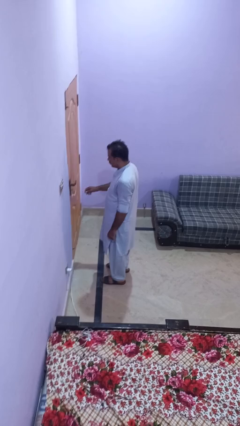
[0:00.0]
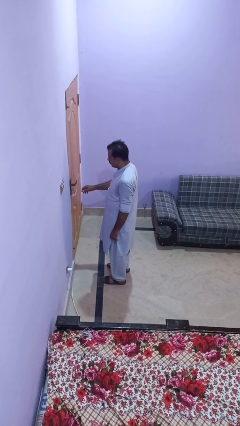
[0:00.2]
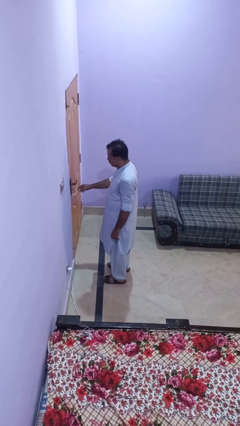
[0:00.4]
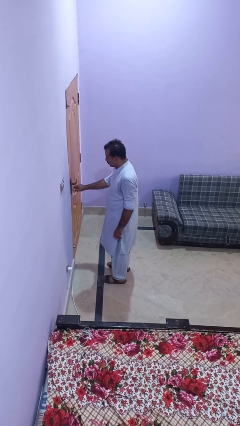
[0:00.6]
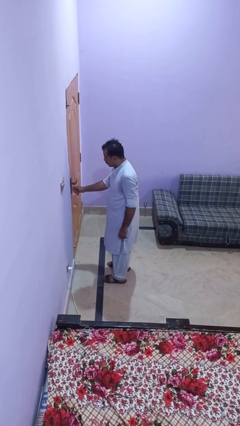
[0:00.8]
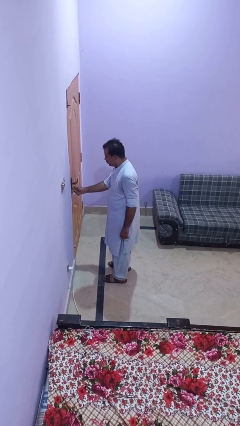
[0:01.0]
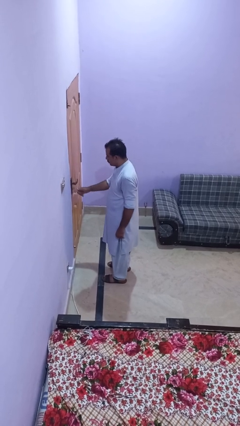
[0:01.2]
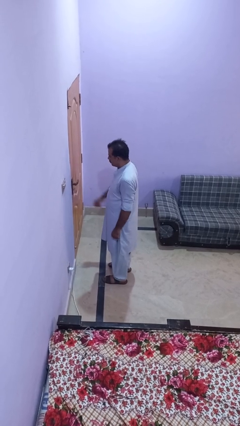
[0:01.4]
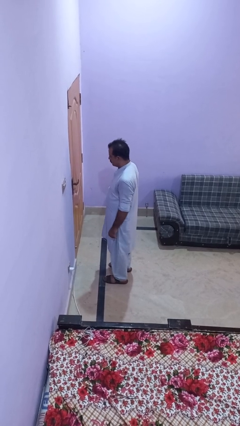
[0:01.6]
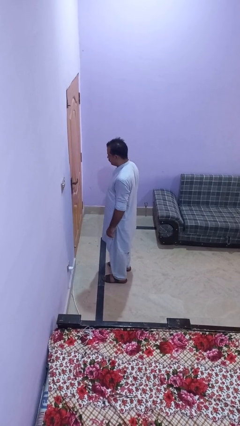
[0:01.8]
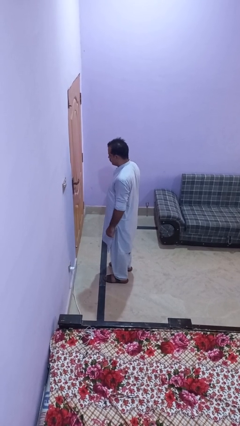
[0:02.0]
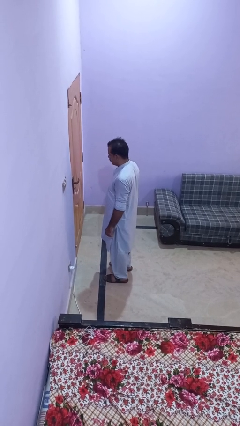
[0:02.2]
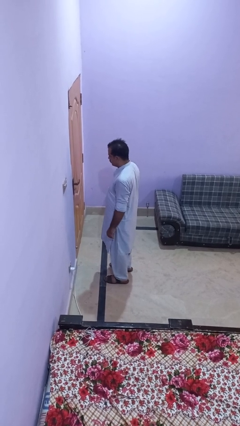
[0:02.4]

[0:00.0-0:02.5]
person unlocks door with keys

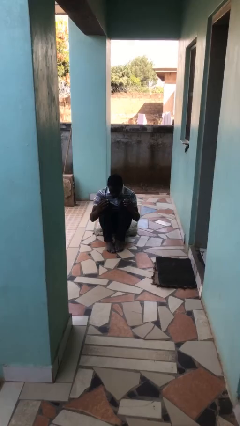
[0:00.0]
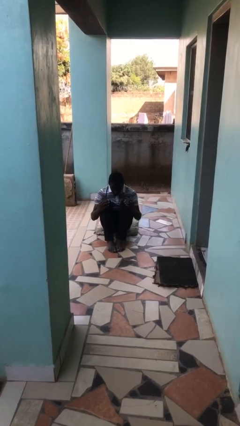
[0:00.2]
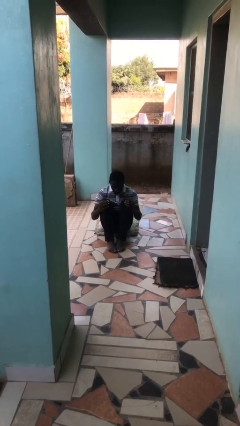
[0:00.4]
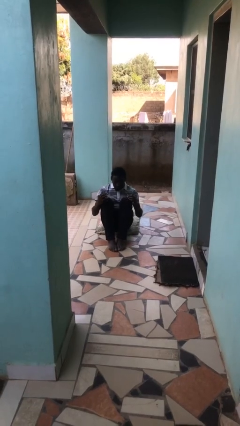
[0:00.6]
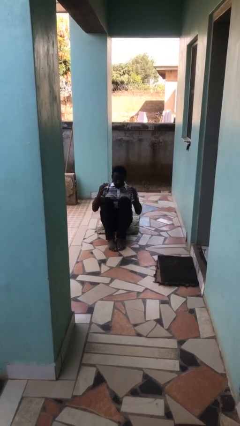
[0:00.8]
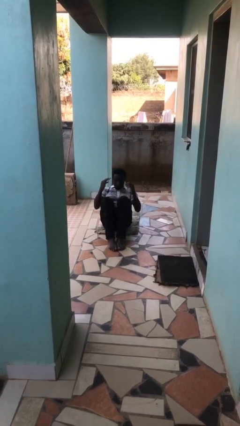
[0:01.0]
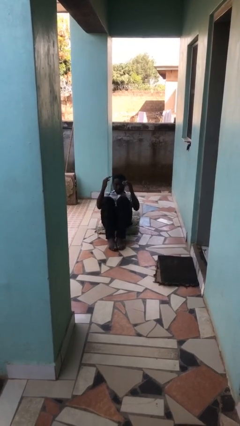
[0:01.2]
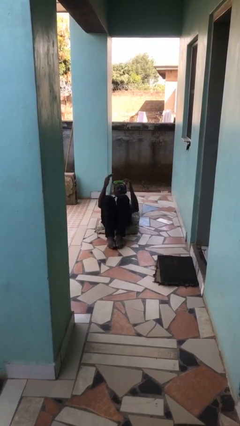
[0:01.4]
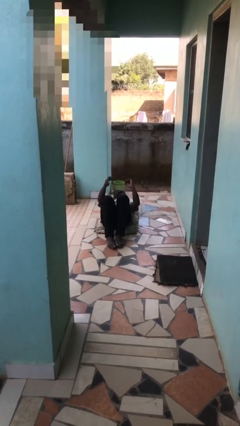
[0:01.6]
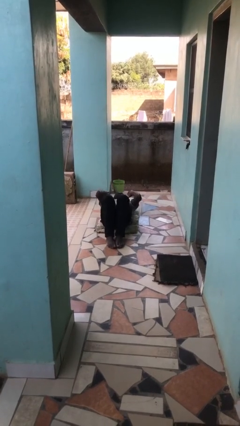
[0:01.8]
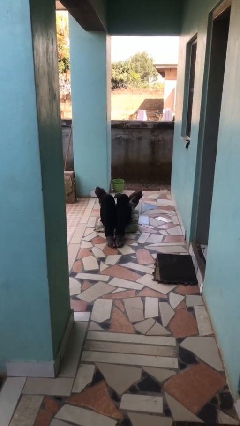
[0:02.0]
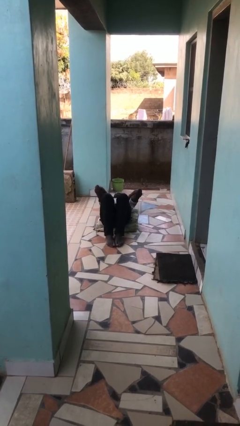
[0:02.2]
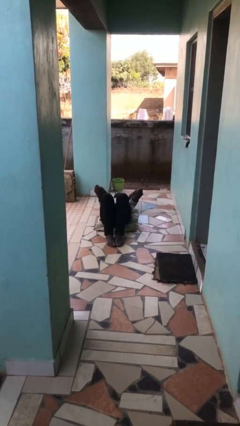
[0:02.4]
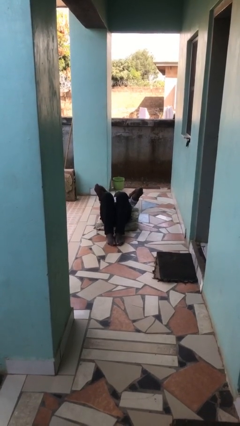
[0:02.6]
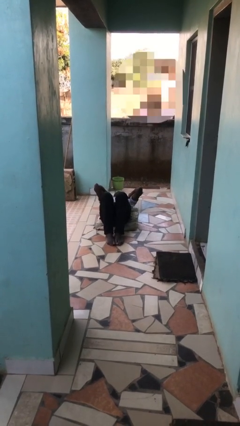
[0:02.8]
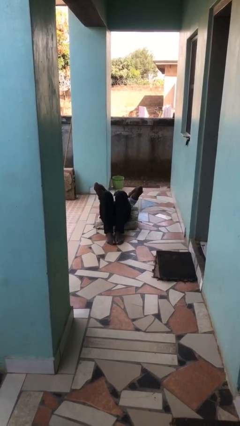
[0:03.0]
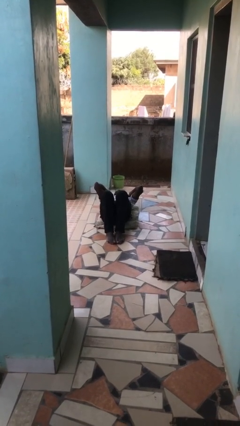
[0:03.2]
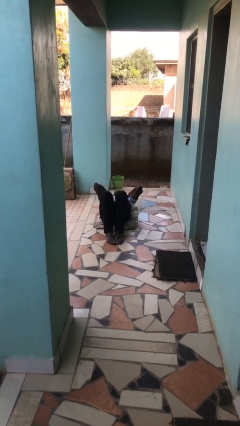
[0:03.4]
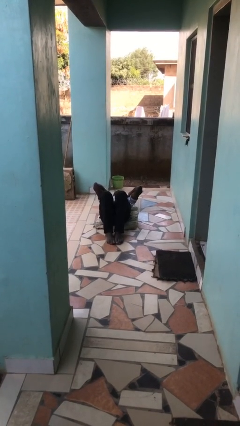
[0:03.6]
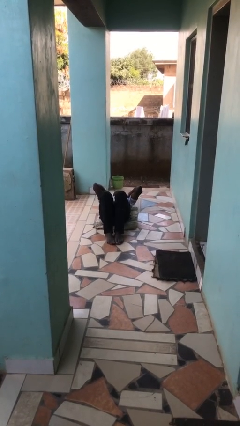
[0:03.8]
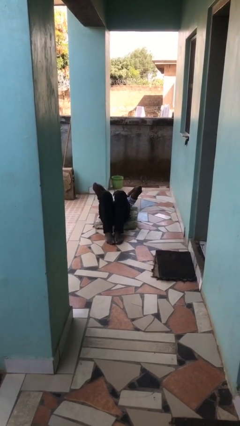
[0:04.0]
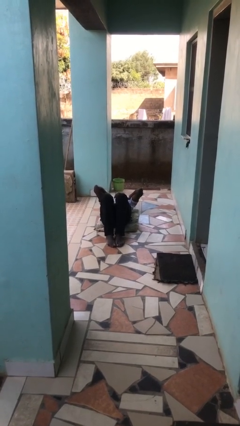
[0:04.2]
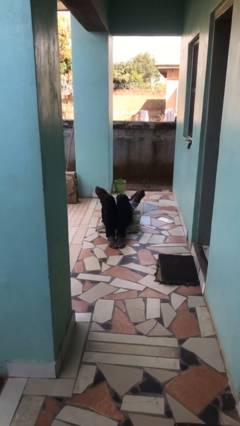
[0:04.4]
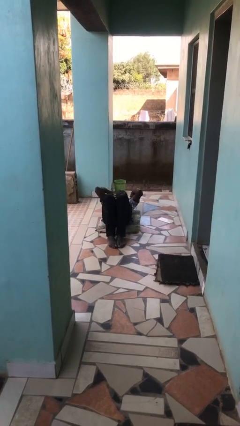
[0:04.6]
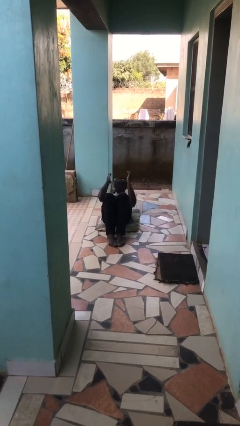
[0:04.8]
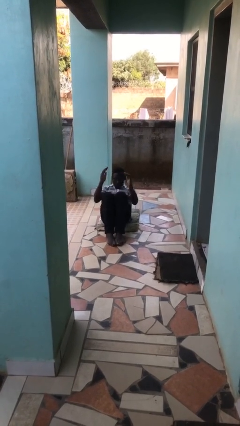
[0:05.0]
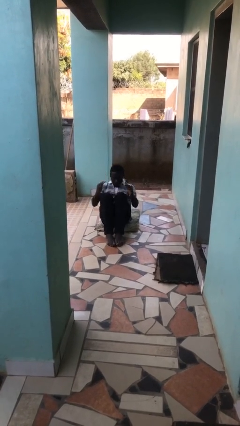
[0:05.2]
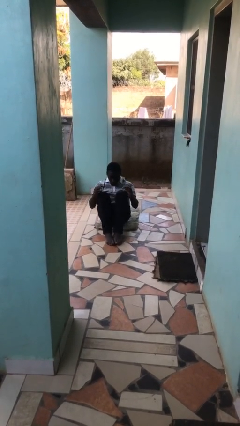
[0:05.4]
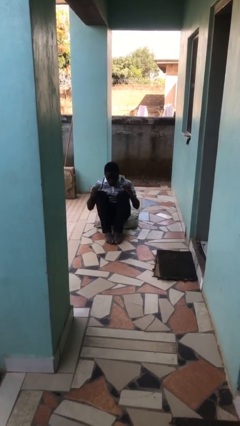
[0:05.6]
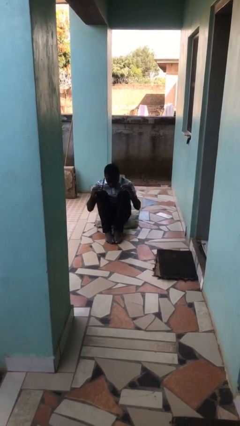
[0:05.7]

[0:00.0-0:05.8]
person exercises with situp

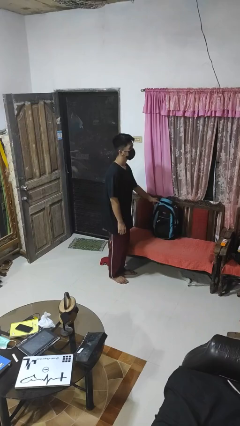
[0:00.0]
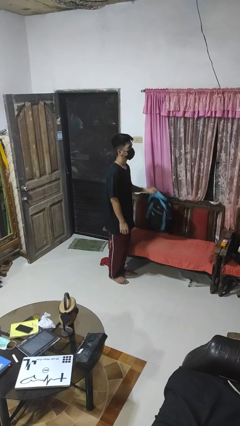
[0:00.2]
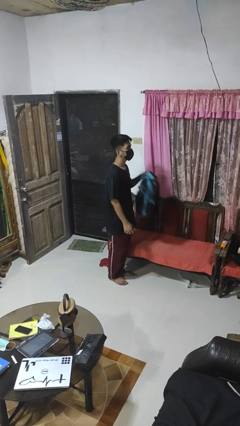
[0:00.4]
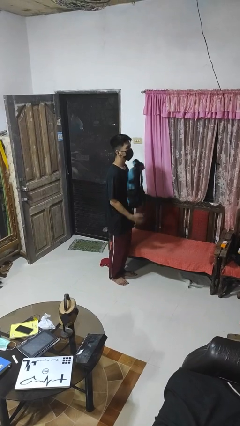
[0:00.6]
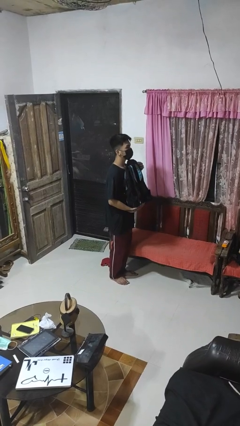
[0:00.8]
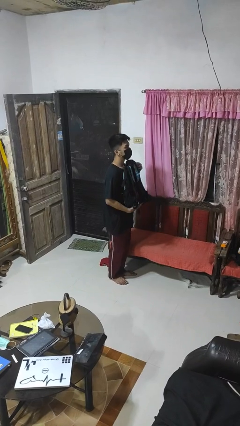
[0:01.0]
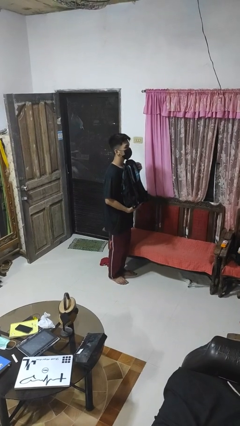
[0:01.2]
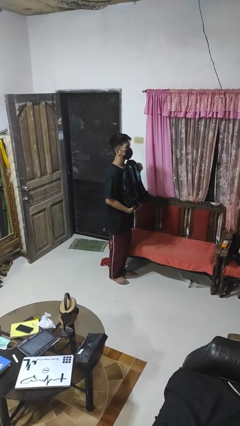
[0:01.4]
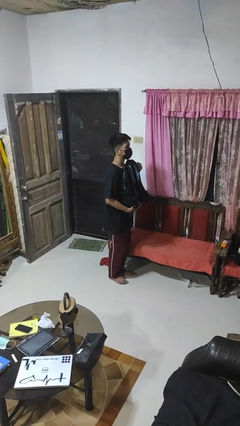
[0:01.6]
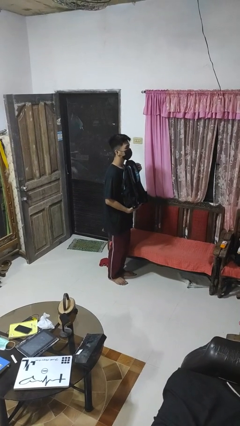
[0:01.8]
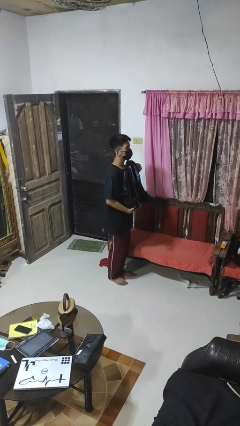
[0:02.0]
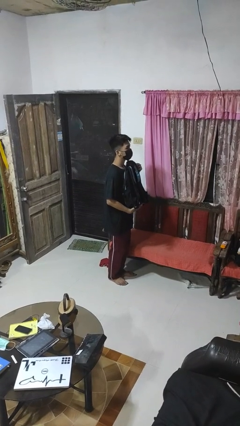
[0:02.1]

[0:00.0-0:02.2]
person picks up object from couch

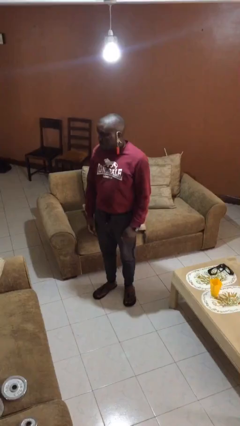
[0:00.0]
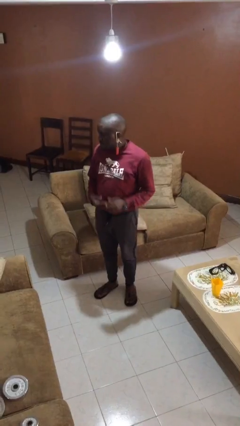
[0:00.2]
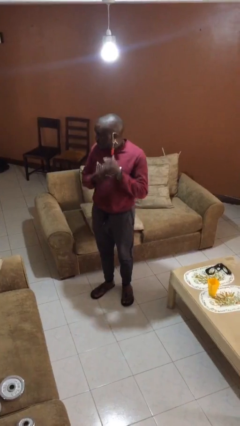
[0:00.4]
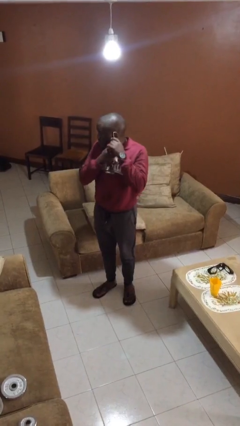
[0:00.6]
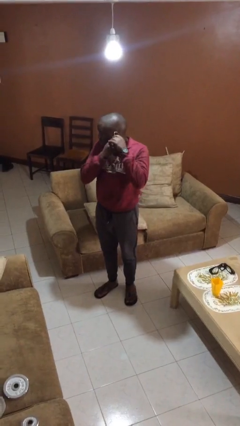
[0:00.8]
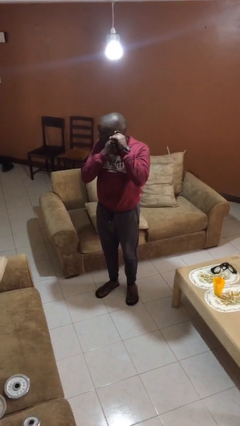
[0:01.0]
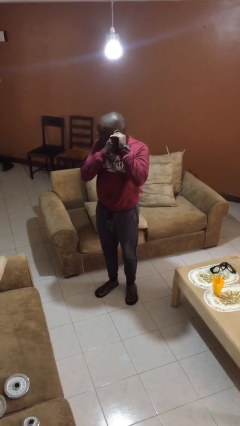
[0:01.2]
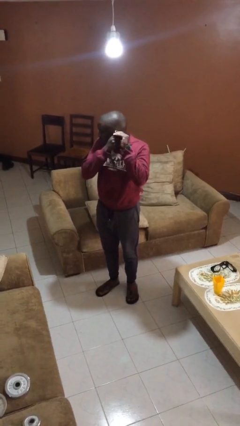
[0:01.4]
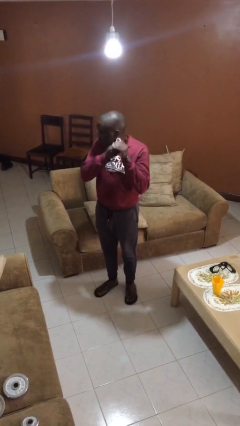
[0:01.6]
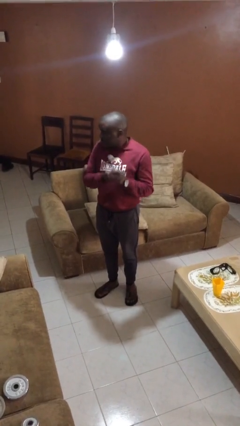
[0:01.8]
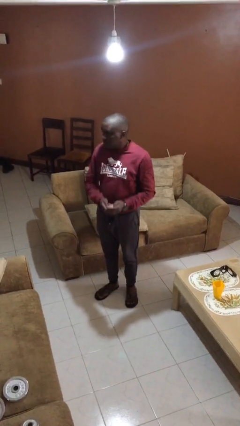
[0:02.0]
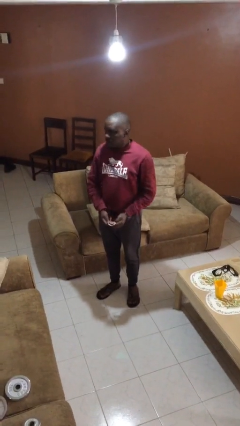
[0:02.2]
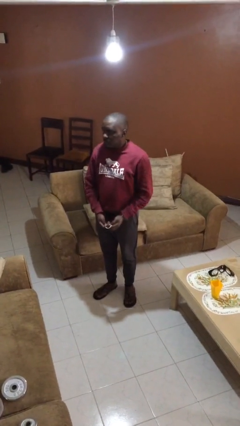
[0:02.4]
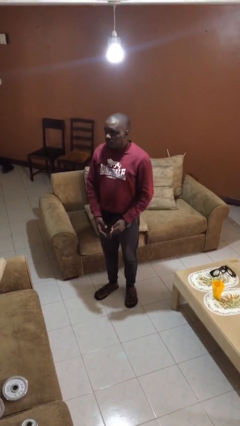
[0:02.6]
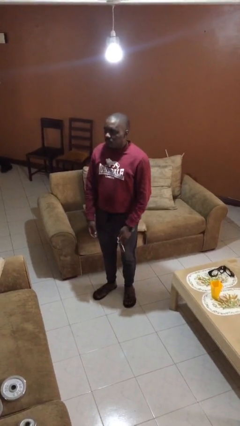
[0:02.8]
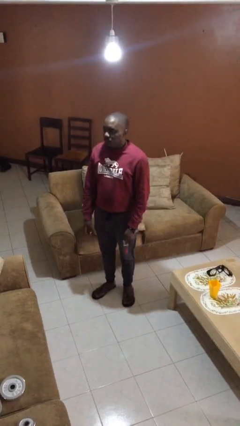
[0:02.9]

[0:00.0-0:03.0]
person takes off earrings

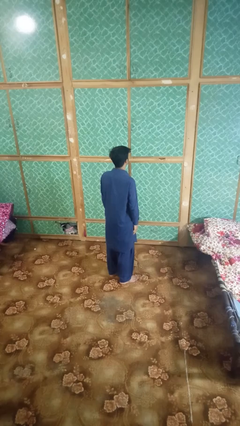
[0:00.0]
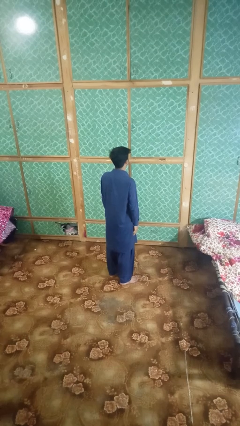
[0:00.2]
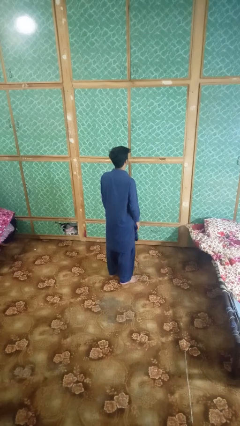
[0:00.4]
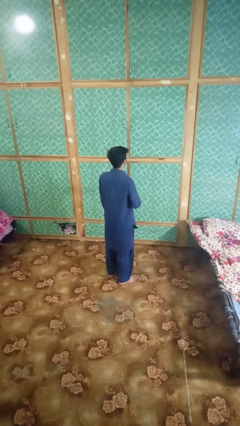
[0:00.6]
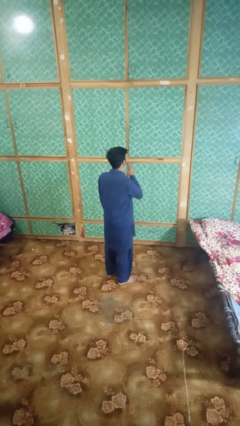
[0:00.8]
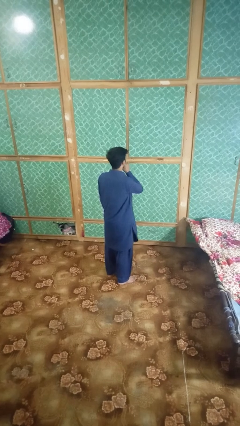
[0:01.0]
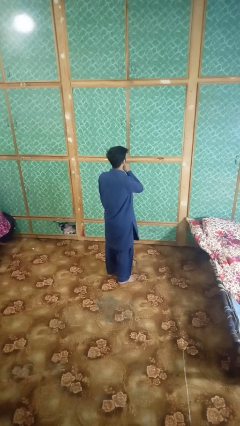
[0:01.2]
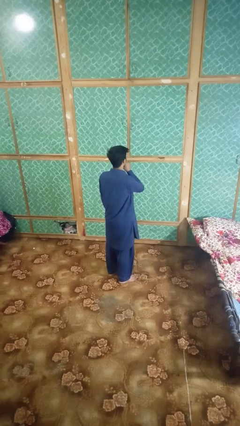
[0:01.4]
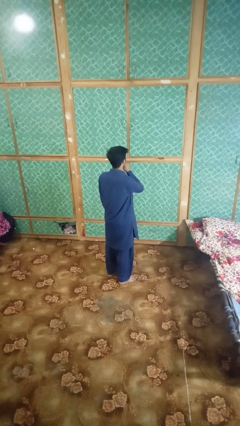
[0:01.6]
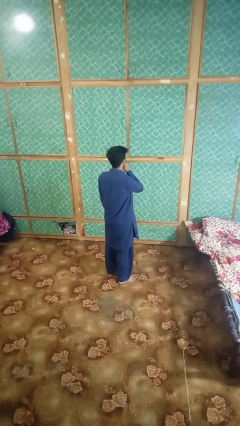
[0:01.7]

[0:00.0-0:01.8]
person gestures be quiet

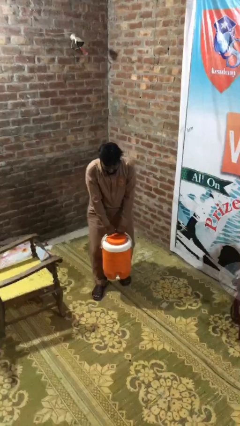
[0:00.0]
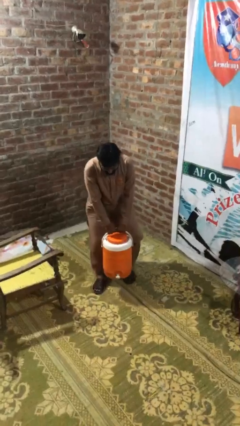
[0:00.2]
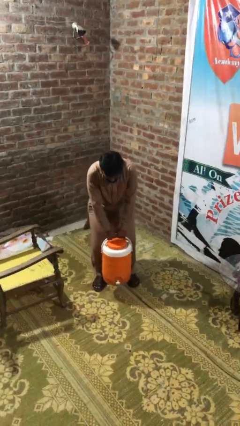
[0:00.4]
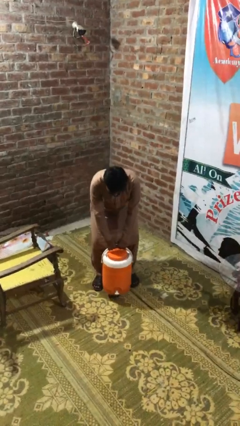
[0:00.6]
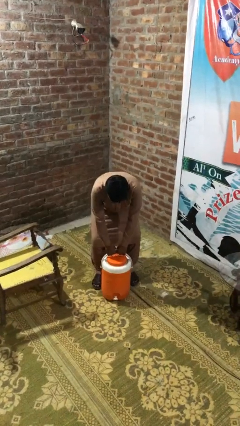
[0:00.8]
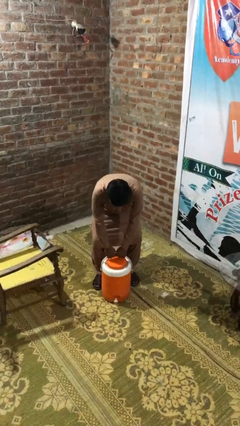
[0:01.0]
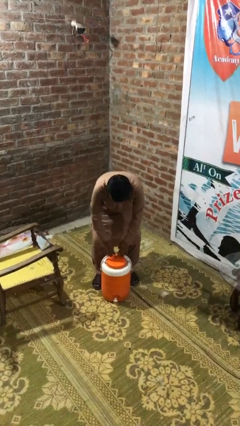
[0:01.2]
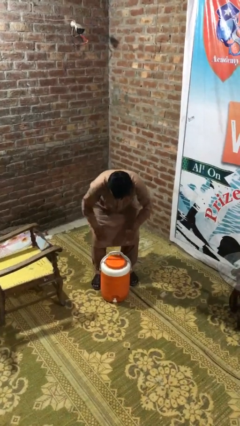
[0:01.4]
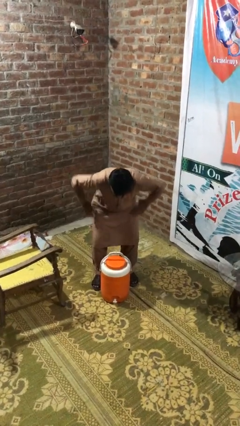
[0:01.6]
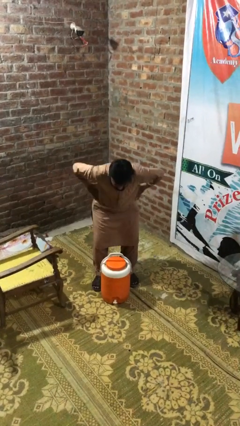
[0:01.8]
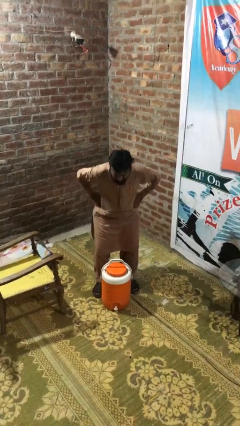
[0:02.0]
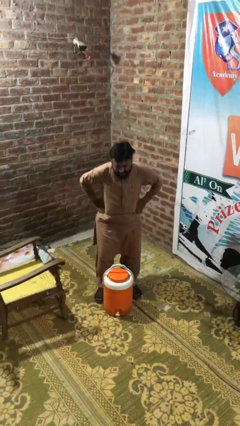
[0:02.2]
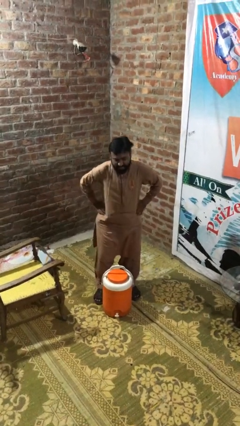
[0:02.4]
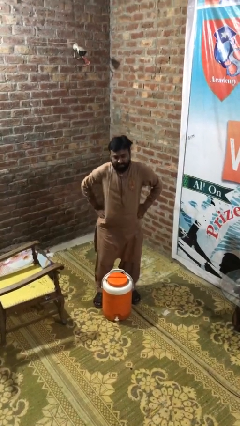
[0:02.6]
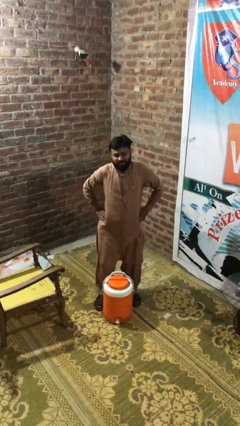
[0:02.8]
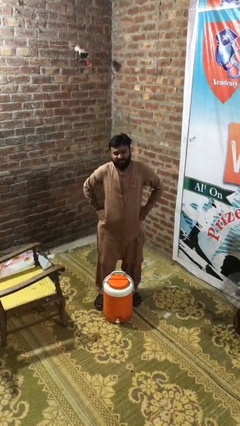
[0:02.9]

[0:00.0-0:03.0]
person puts down object on floor
